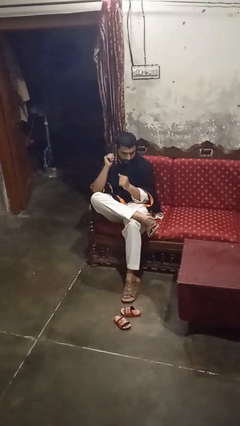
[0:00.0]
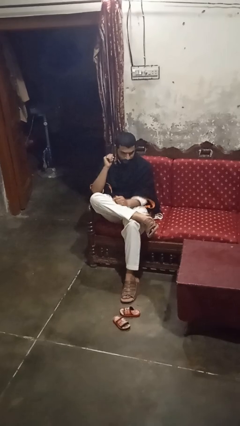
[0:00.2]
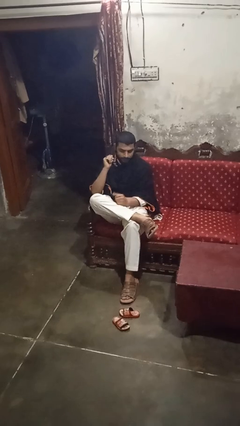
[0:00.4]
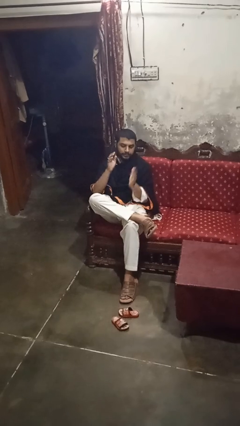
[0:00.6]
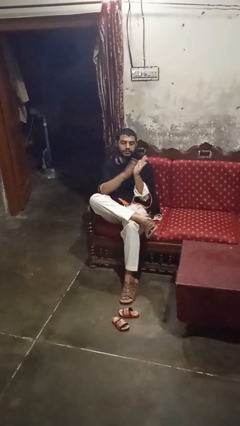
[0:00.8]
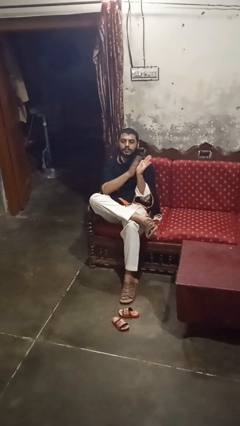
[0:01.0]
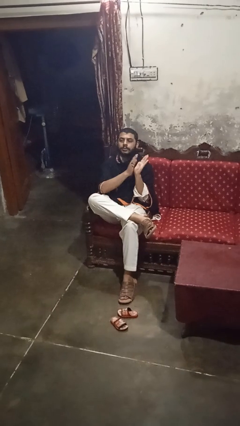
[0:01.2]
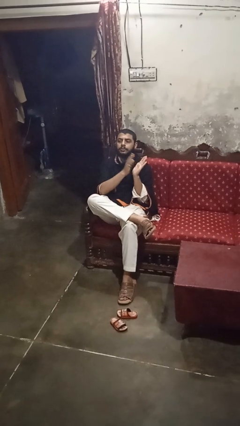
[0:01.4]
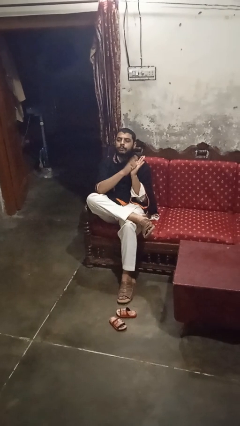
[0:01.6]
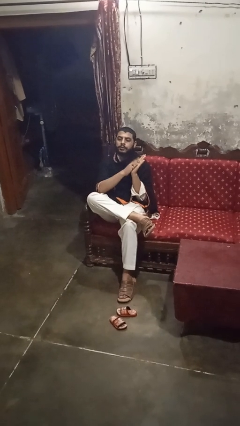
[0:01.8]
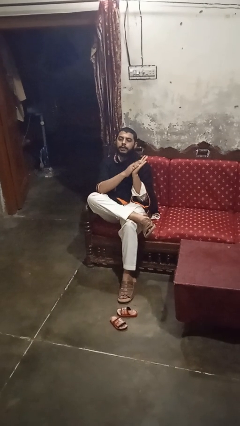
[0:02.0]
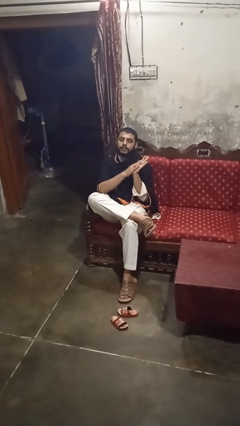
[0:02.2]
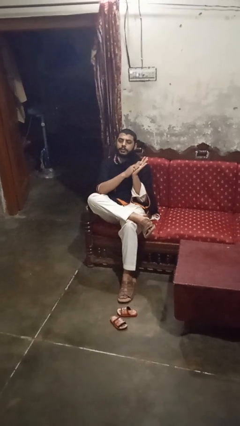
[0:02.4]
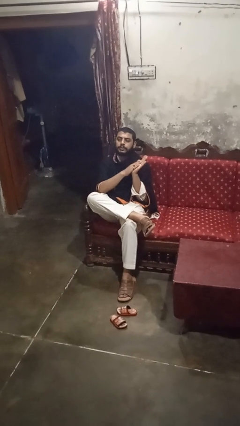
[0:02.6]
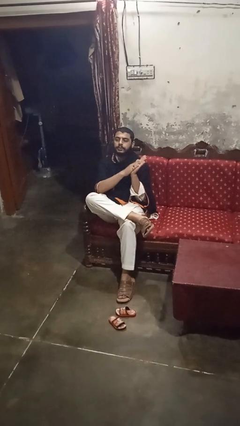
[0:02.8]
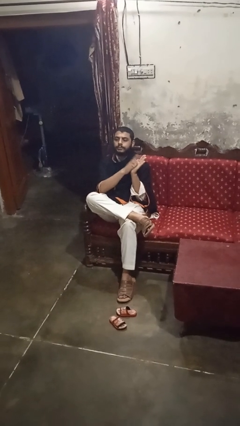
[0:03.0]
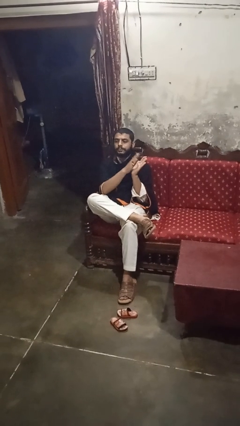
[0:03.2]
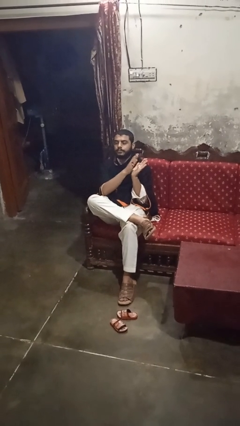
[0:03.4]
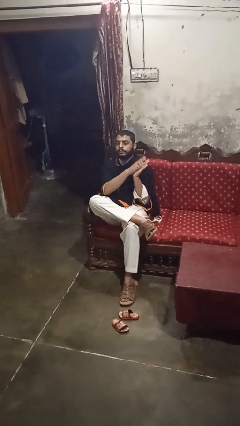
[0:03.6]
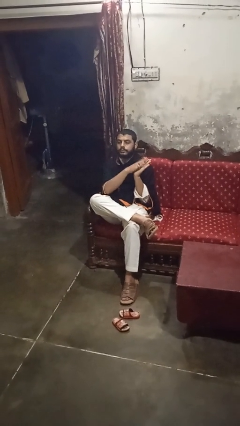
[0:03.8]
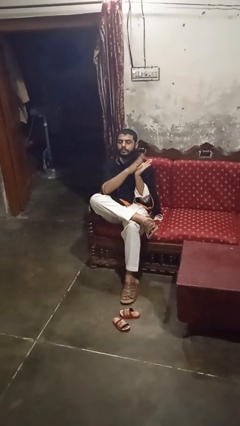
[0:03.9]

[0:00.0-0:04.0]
person claps hands

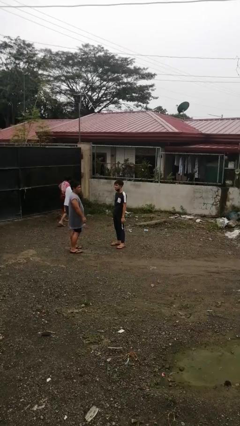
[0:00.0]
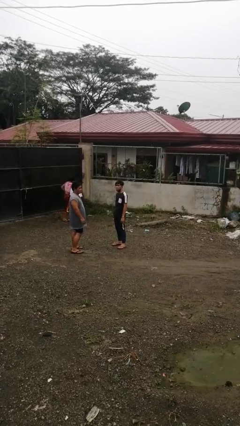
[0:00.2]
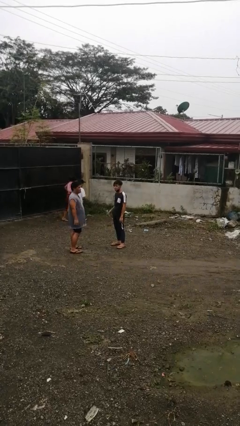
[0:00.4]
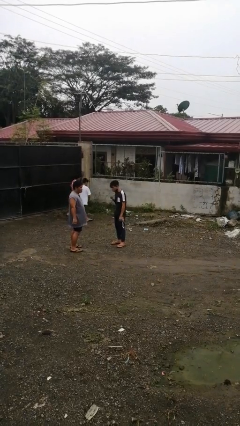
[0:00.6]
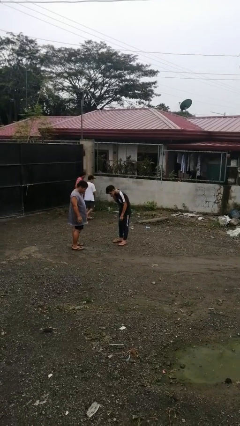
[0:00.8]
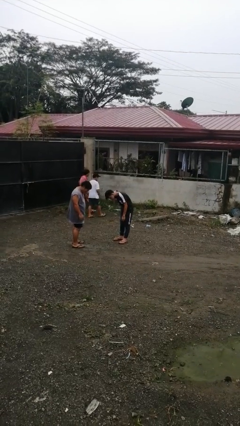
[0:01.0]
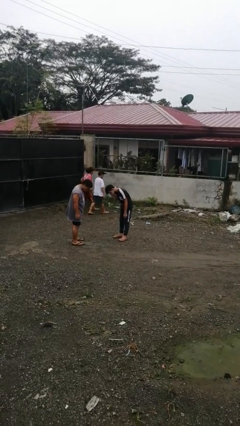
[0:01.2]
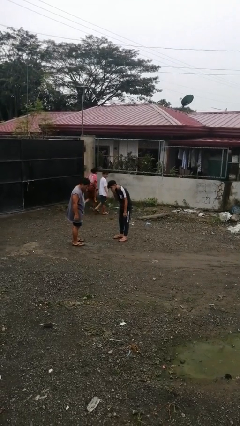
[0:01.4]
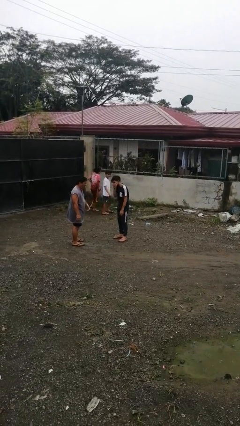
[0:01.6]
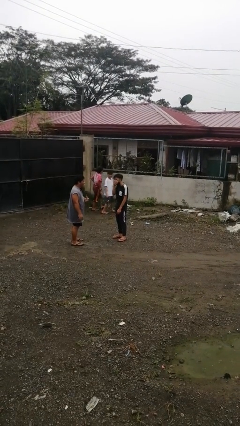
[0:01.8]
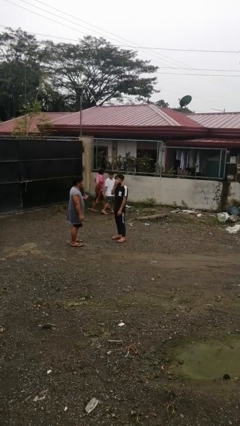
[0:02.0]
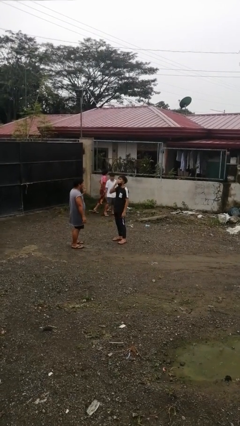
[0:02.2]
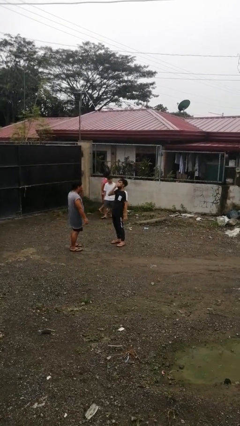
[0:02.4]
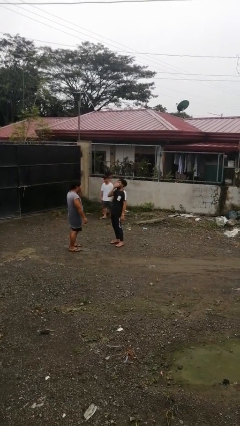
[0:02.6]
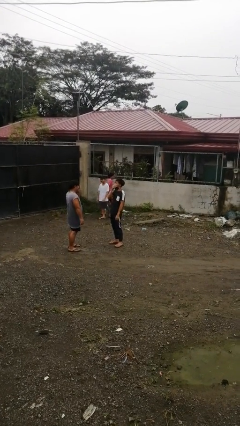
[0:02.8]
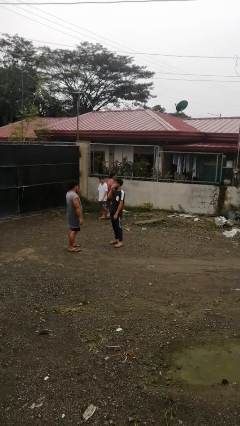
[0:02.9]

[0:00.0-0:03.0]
person laughs with person

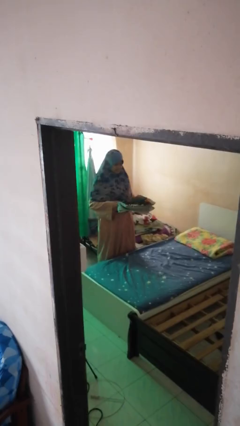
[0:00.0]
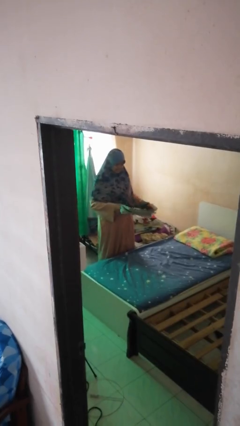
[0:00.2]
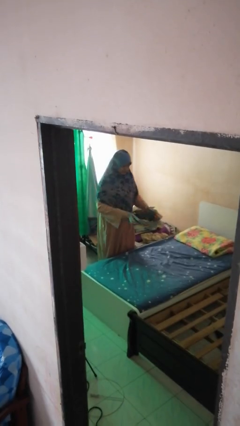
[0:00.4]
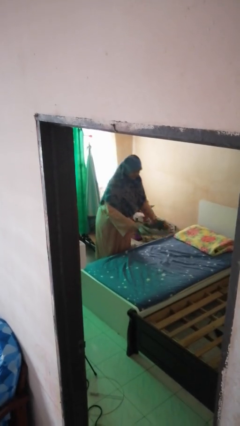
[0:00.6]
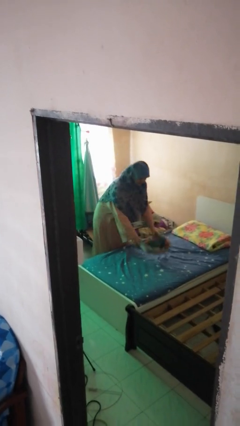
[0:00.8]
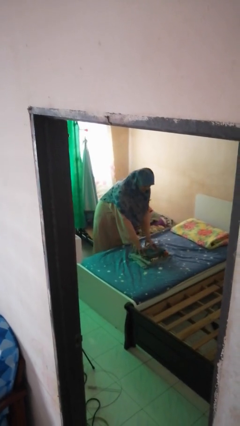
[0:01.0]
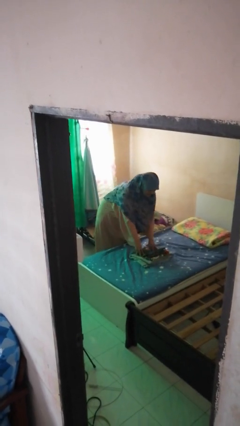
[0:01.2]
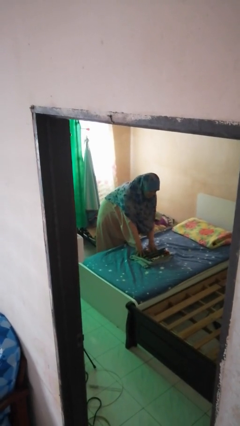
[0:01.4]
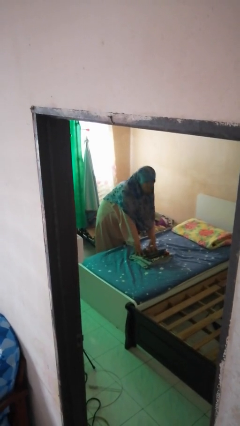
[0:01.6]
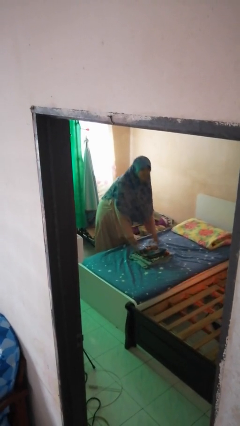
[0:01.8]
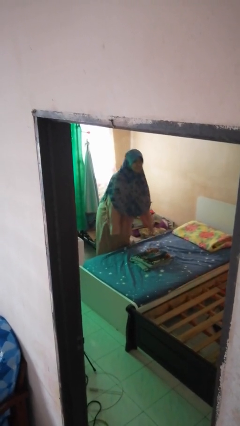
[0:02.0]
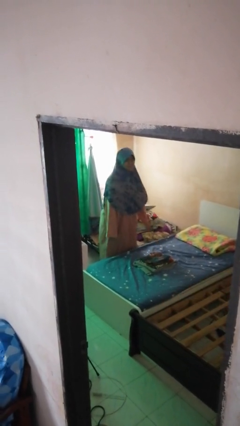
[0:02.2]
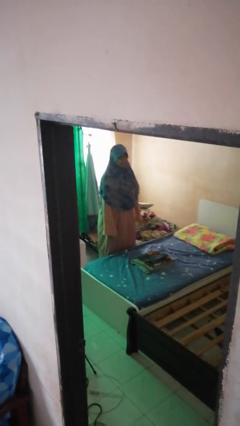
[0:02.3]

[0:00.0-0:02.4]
person puts down object on bed

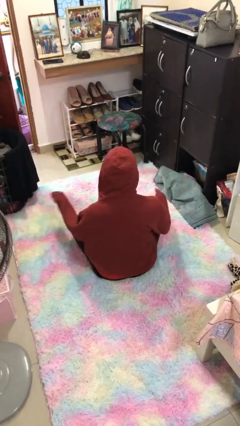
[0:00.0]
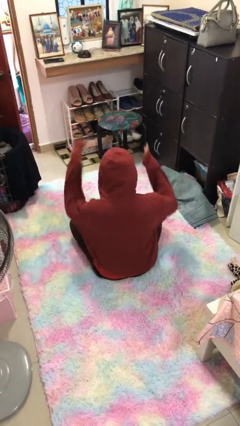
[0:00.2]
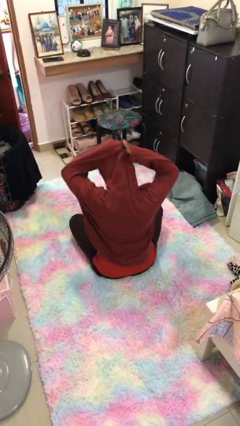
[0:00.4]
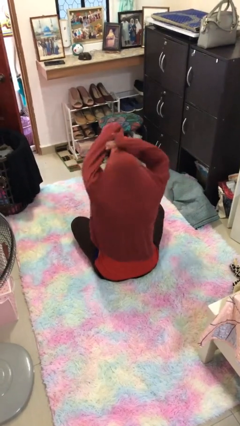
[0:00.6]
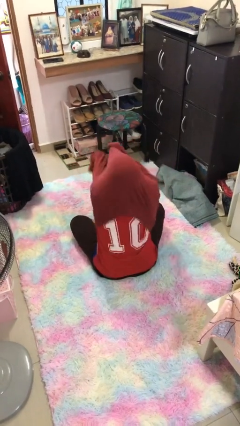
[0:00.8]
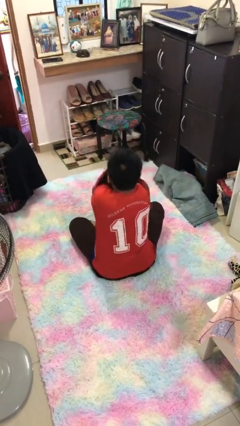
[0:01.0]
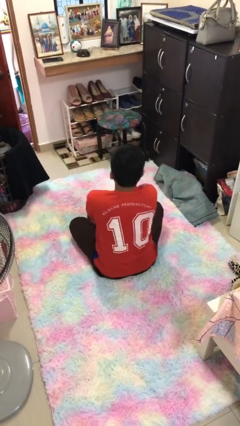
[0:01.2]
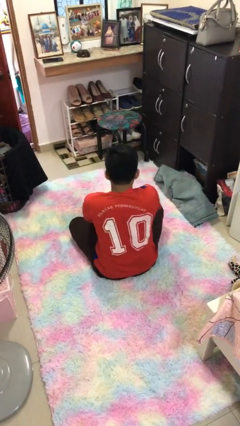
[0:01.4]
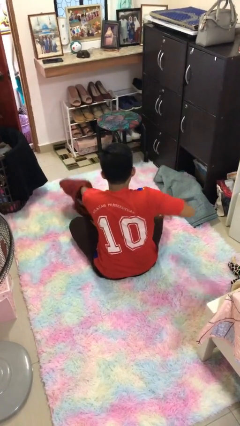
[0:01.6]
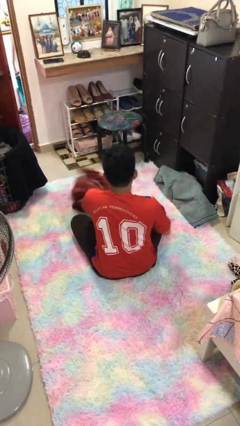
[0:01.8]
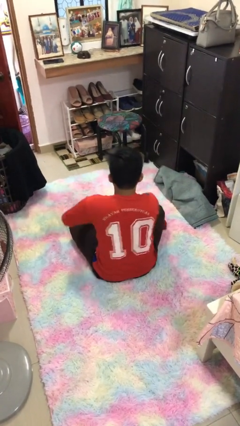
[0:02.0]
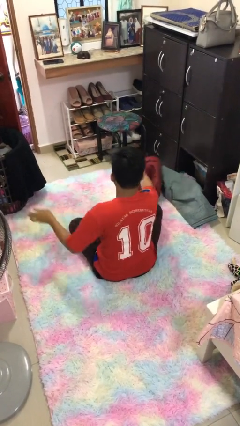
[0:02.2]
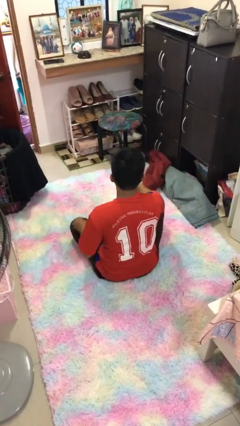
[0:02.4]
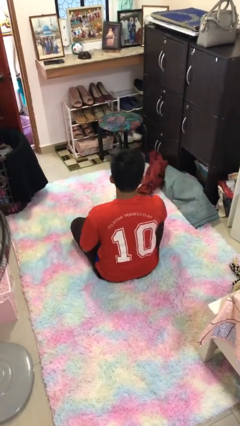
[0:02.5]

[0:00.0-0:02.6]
person takes off hoodie

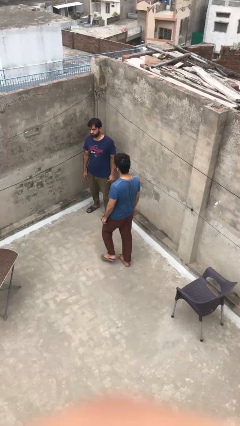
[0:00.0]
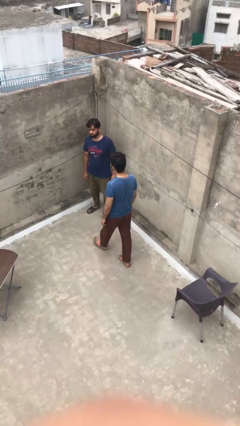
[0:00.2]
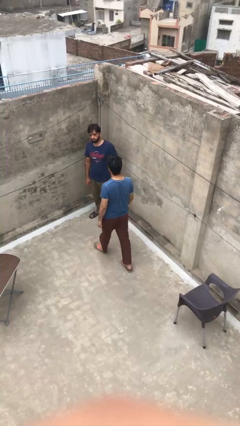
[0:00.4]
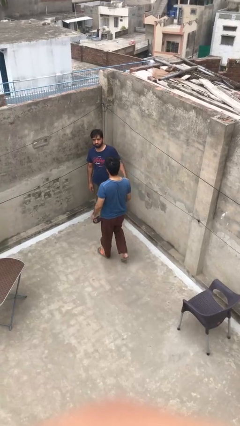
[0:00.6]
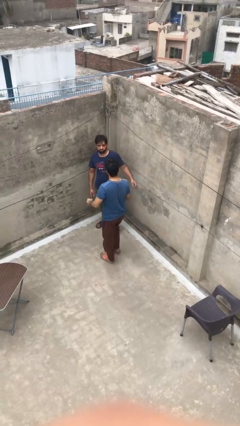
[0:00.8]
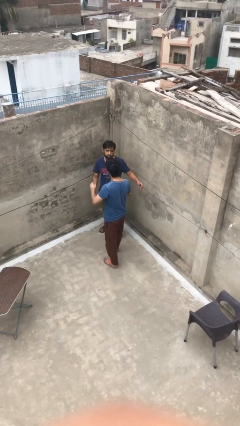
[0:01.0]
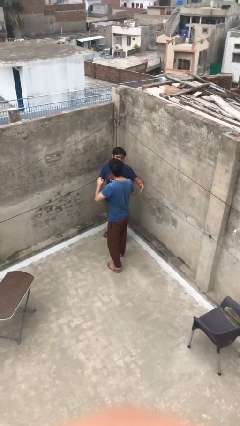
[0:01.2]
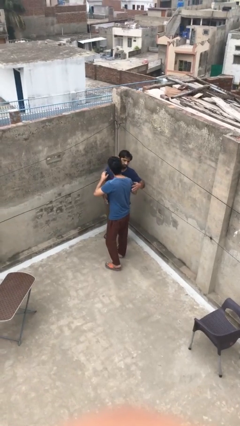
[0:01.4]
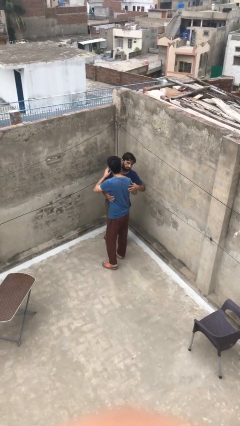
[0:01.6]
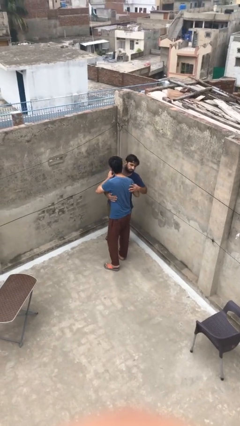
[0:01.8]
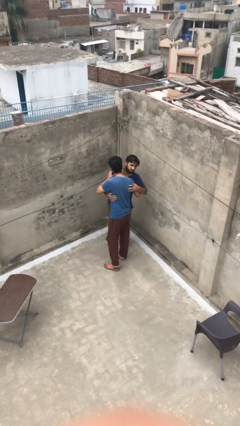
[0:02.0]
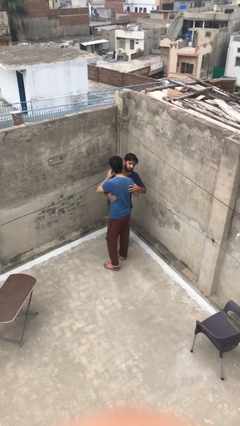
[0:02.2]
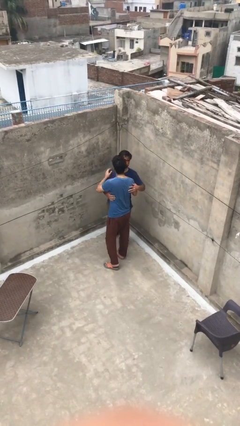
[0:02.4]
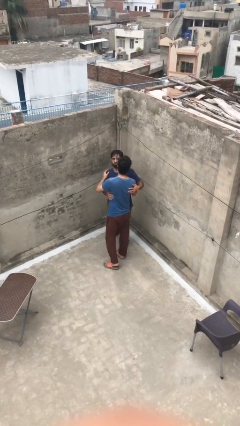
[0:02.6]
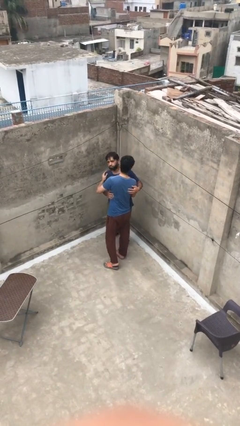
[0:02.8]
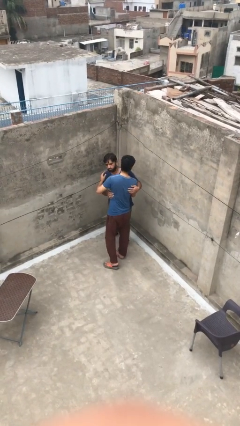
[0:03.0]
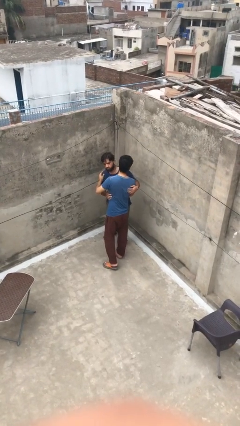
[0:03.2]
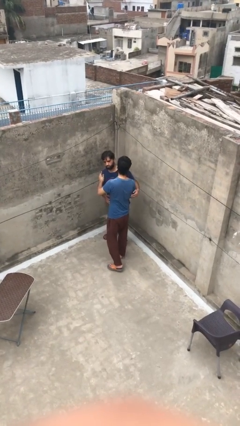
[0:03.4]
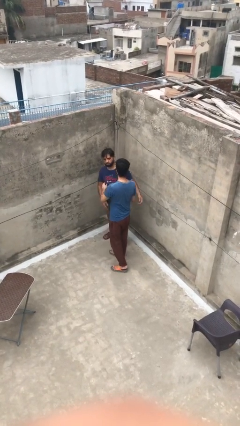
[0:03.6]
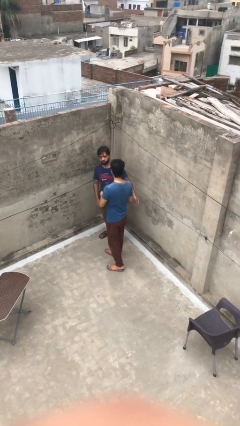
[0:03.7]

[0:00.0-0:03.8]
person embraces person

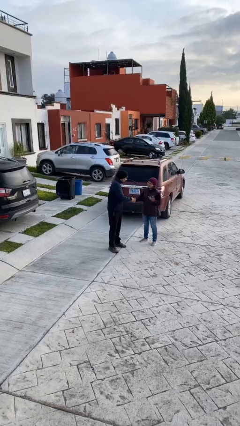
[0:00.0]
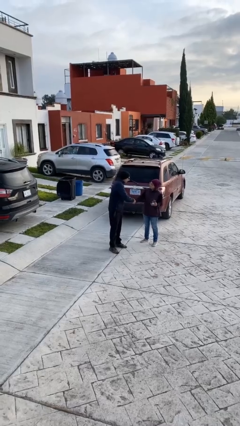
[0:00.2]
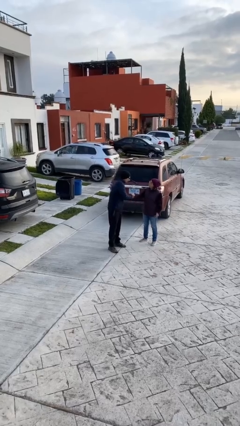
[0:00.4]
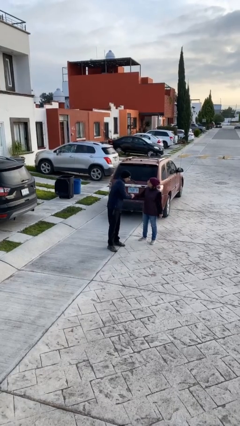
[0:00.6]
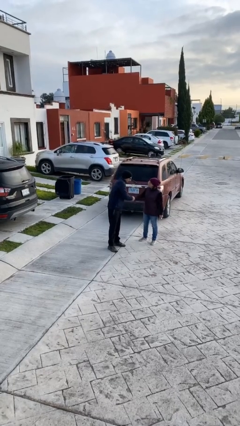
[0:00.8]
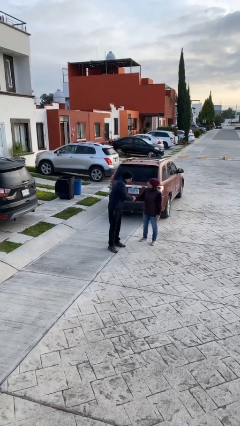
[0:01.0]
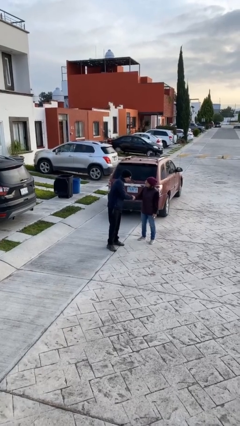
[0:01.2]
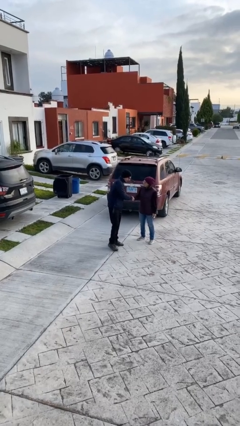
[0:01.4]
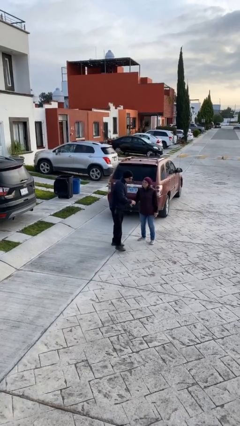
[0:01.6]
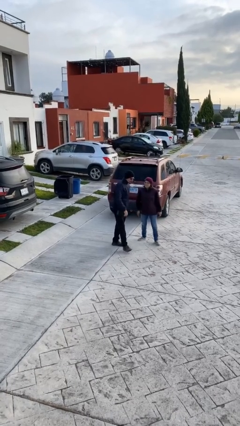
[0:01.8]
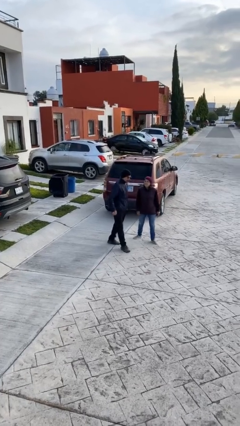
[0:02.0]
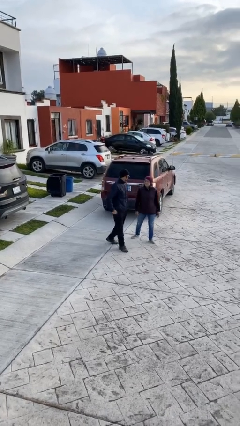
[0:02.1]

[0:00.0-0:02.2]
person shakes hand
